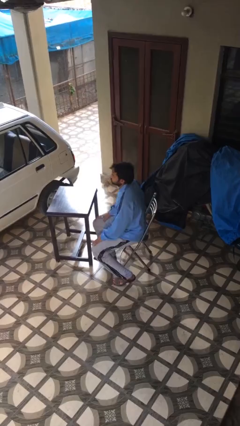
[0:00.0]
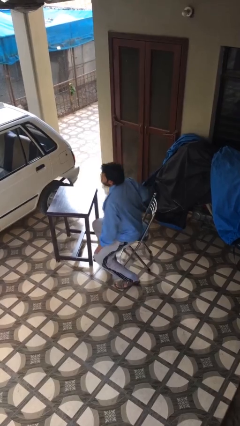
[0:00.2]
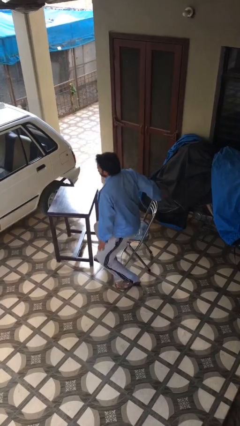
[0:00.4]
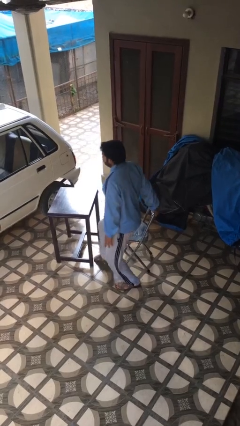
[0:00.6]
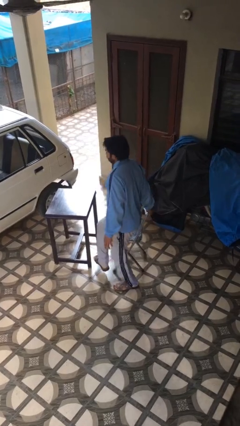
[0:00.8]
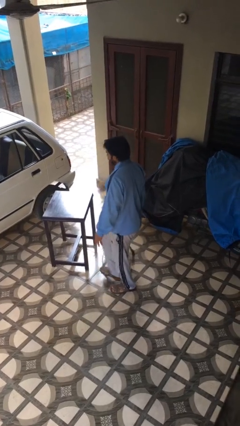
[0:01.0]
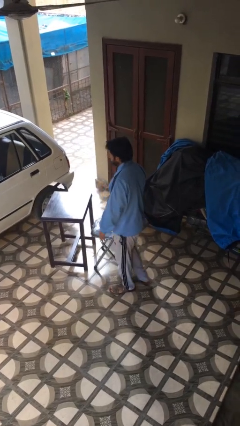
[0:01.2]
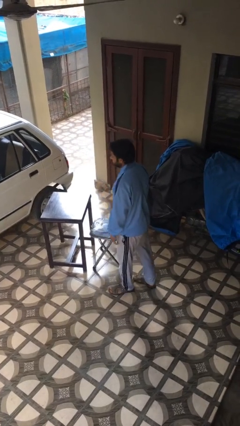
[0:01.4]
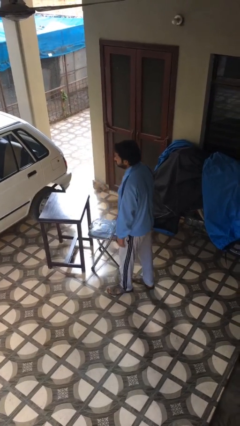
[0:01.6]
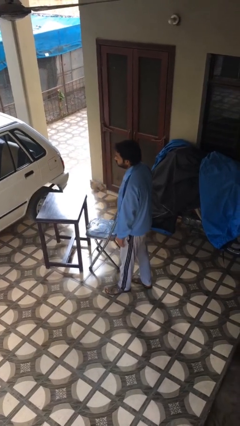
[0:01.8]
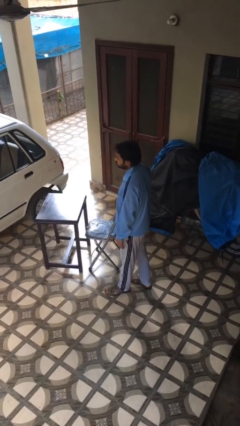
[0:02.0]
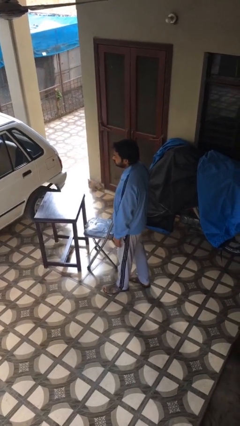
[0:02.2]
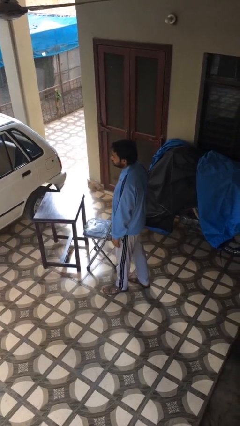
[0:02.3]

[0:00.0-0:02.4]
person stands up

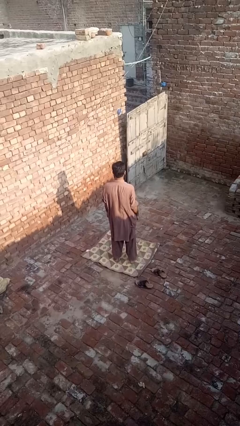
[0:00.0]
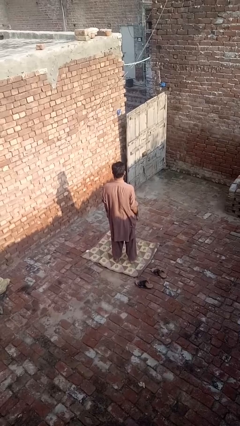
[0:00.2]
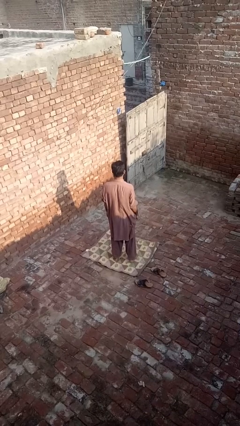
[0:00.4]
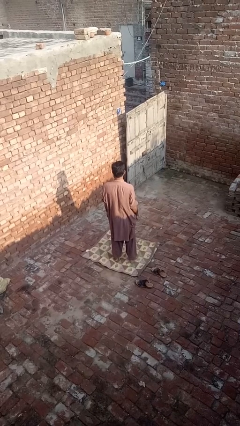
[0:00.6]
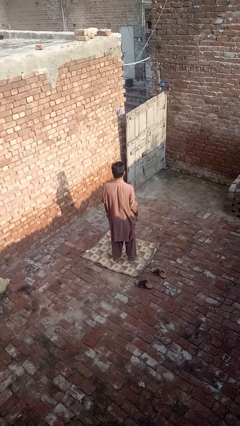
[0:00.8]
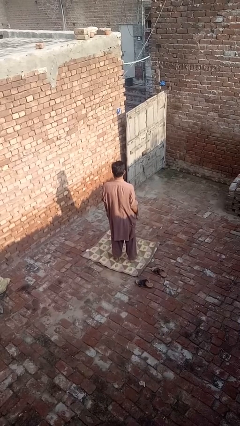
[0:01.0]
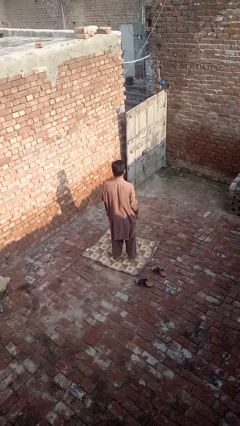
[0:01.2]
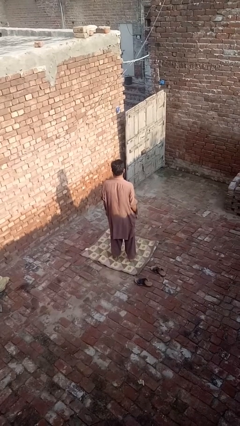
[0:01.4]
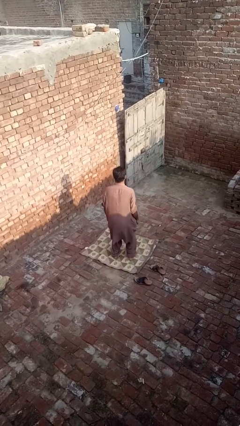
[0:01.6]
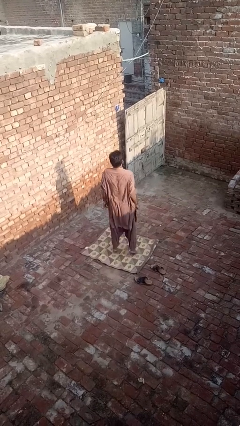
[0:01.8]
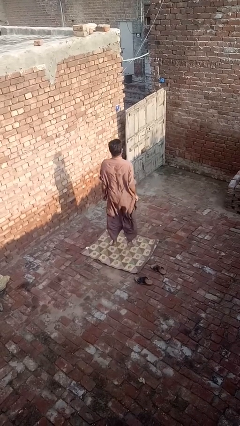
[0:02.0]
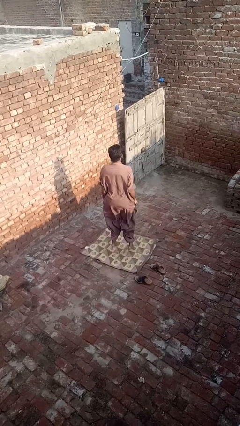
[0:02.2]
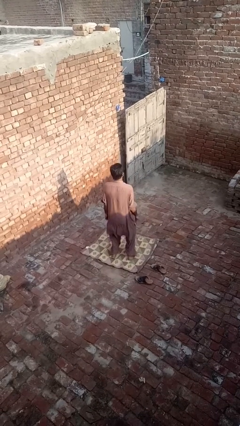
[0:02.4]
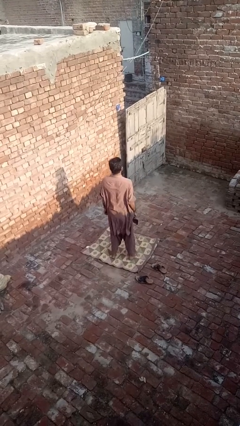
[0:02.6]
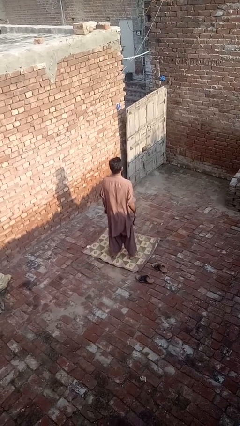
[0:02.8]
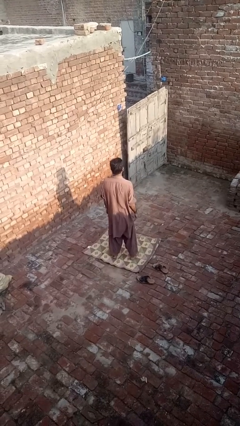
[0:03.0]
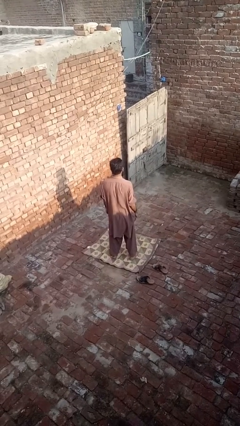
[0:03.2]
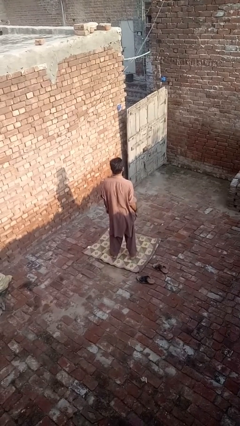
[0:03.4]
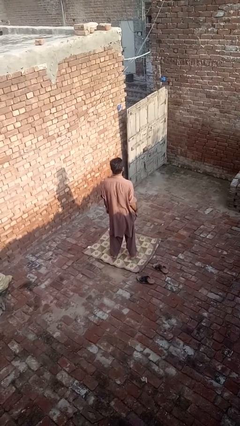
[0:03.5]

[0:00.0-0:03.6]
person jumps

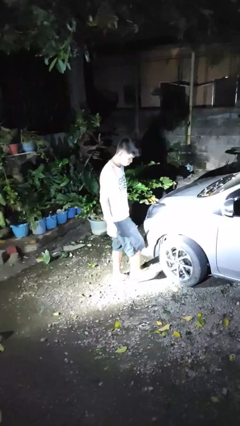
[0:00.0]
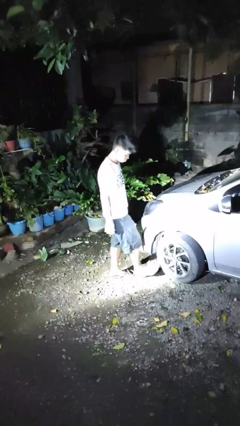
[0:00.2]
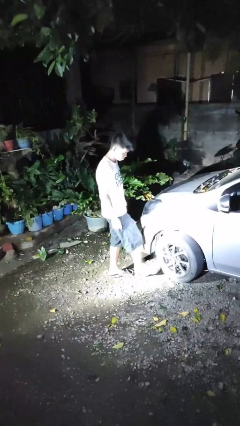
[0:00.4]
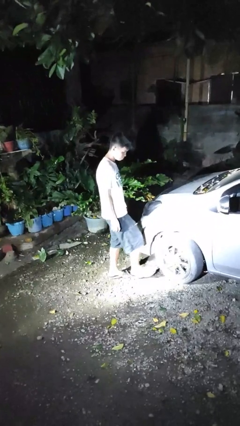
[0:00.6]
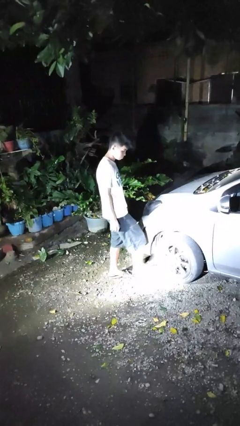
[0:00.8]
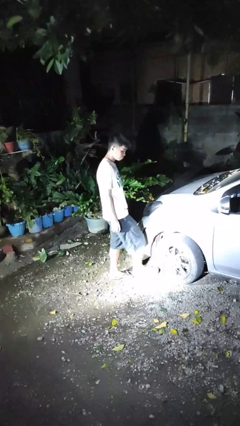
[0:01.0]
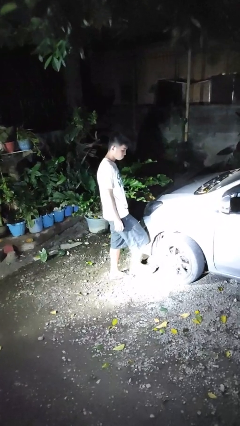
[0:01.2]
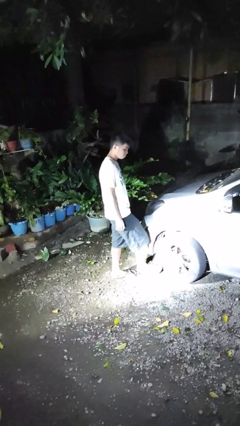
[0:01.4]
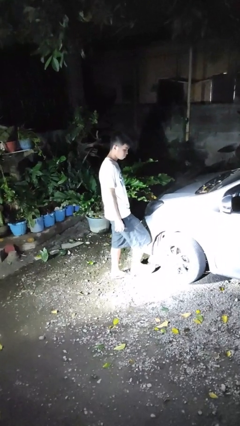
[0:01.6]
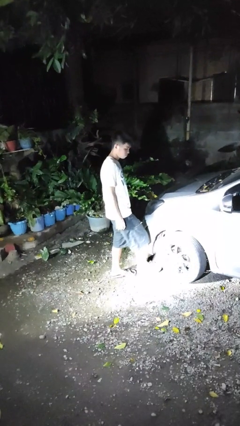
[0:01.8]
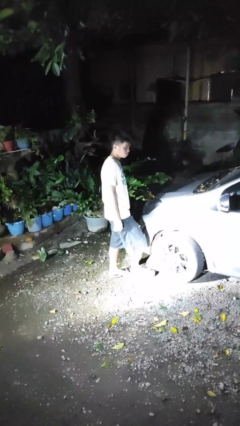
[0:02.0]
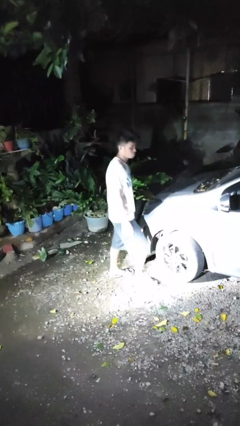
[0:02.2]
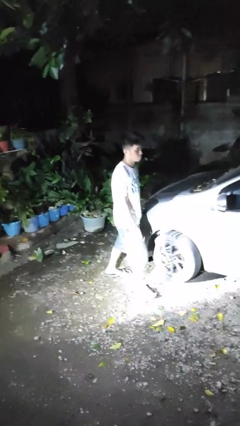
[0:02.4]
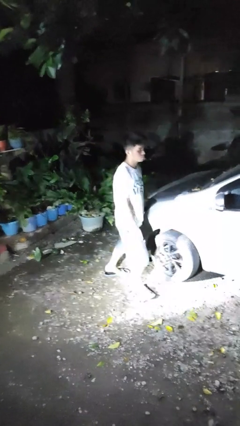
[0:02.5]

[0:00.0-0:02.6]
person kicks car tires

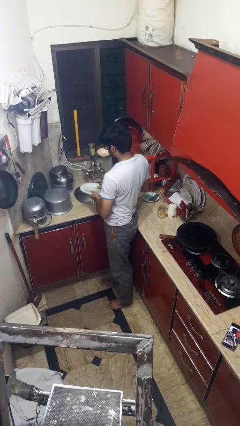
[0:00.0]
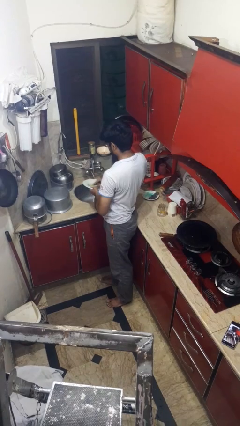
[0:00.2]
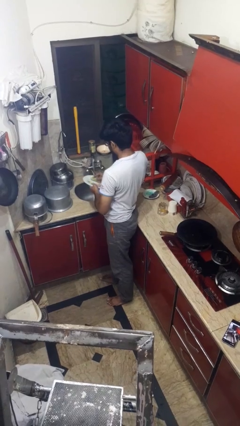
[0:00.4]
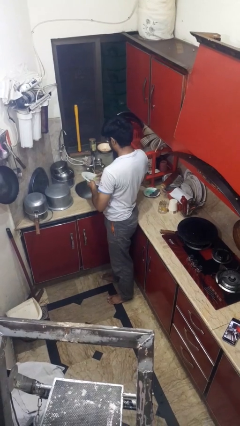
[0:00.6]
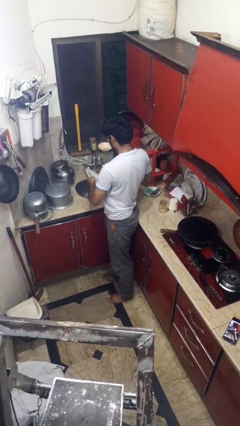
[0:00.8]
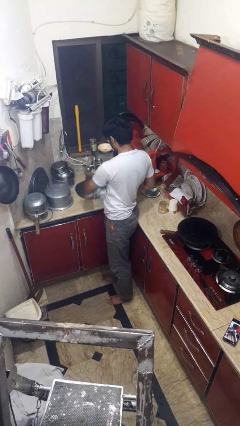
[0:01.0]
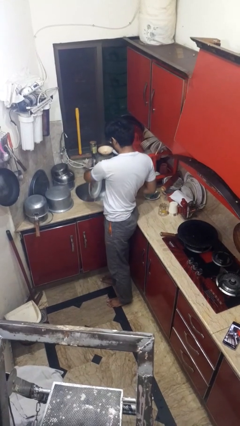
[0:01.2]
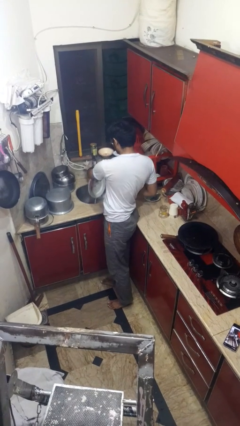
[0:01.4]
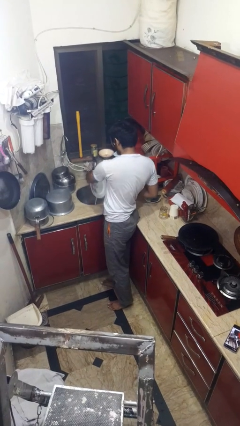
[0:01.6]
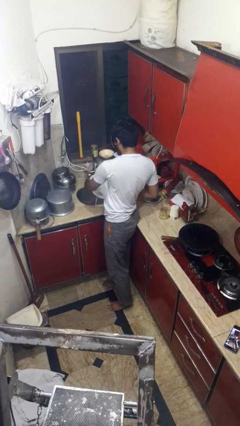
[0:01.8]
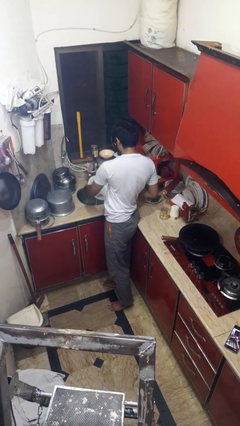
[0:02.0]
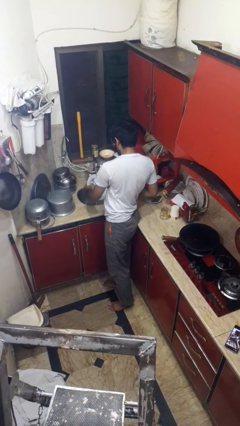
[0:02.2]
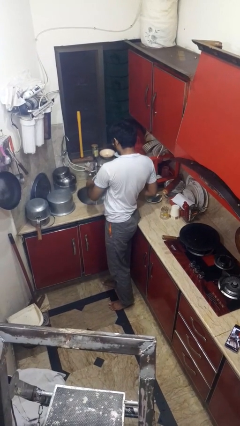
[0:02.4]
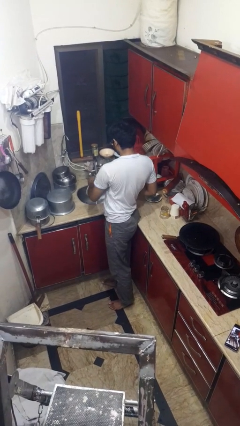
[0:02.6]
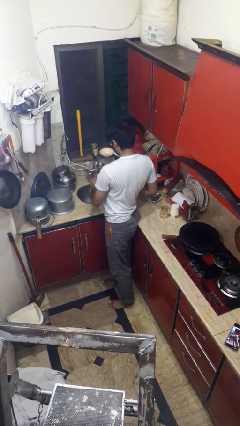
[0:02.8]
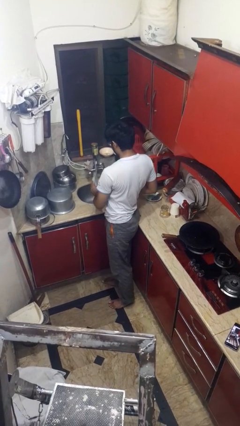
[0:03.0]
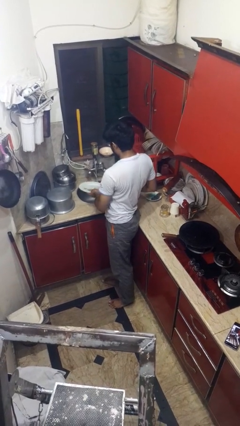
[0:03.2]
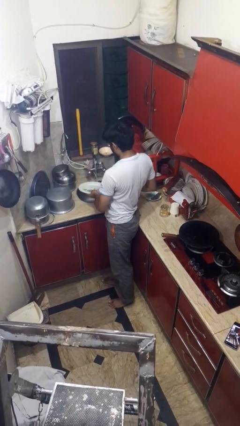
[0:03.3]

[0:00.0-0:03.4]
person washes dish

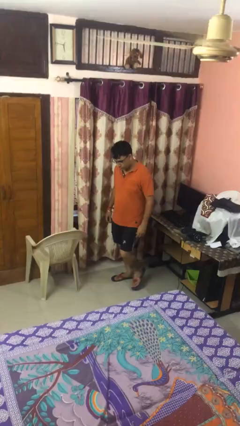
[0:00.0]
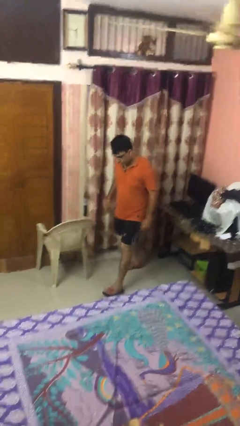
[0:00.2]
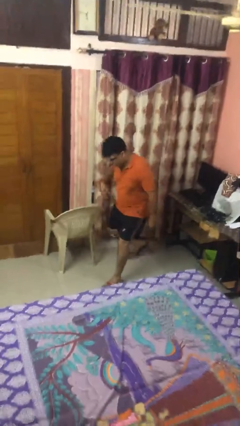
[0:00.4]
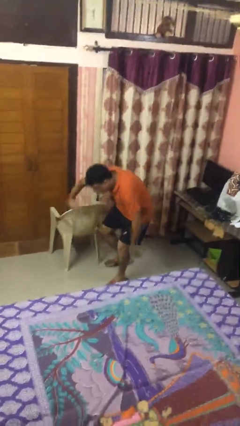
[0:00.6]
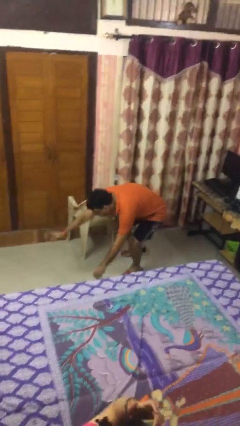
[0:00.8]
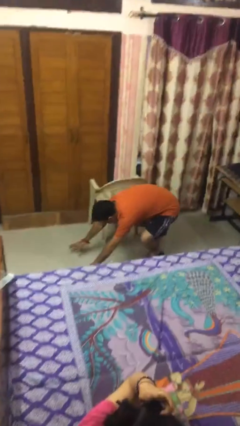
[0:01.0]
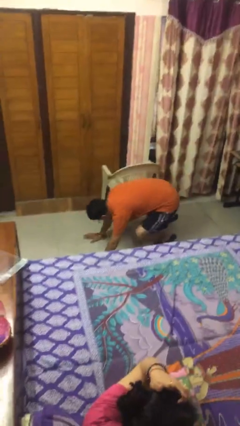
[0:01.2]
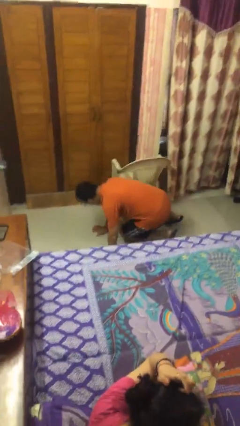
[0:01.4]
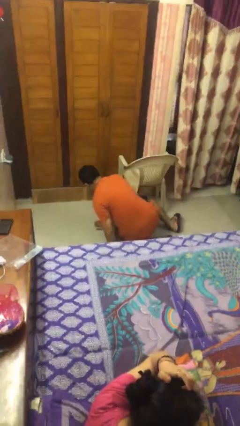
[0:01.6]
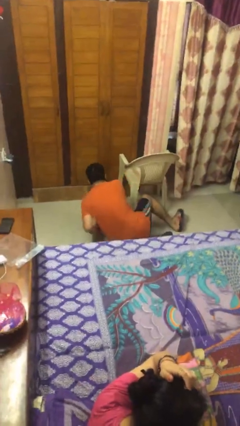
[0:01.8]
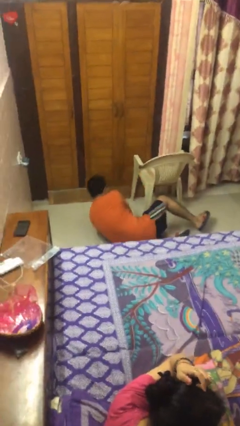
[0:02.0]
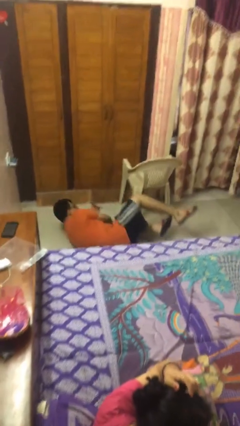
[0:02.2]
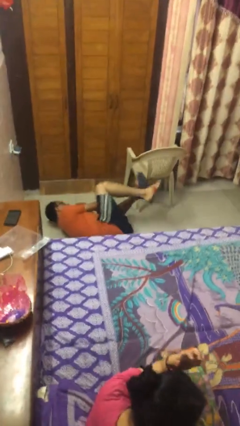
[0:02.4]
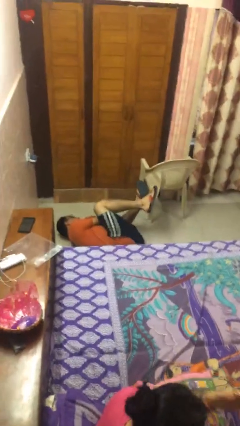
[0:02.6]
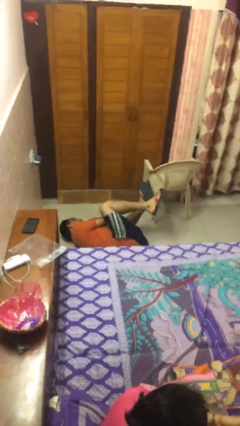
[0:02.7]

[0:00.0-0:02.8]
person trips on object on floor

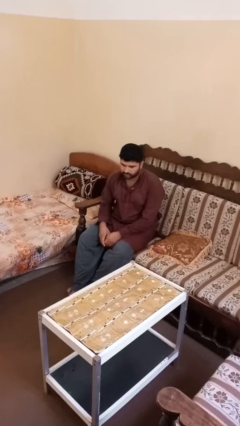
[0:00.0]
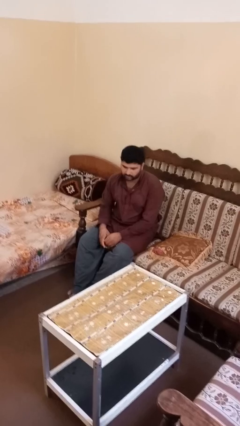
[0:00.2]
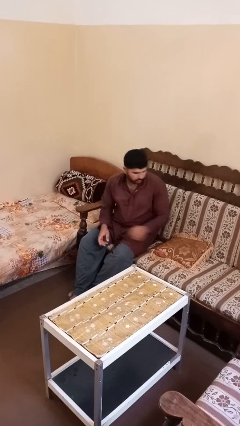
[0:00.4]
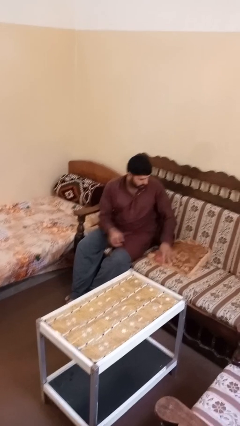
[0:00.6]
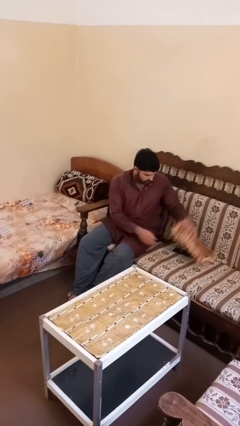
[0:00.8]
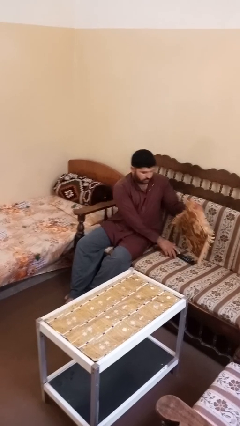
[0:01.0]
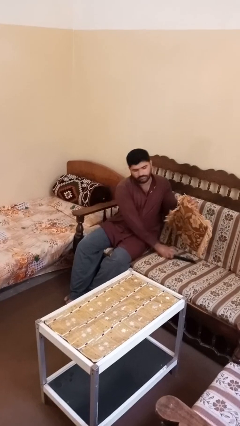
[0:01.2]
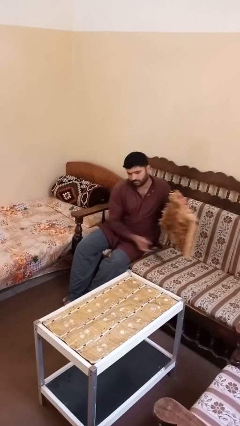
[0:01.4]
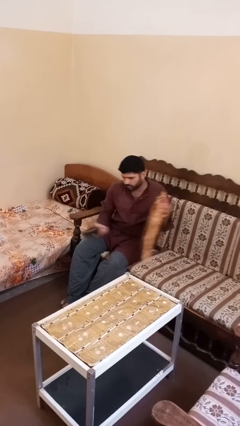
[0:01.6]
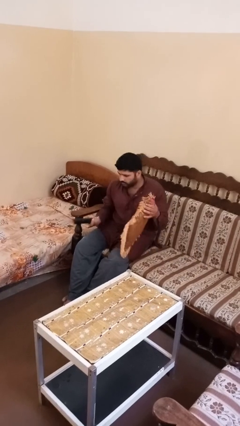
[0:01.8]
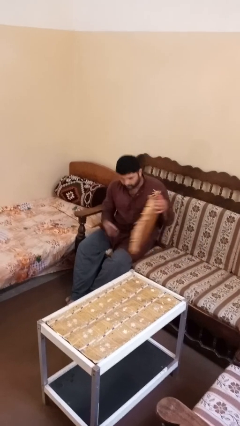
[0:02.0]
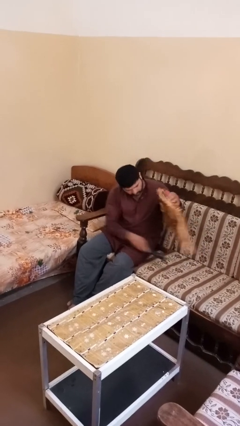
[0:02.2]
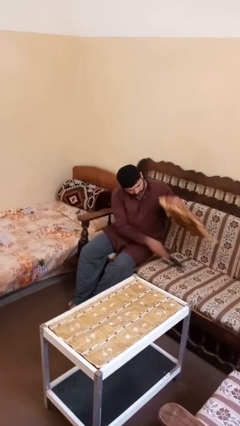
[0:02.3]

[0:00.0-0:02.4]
person searches in couch

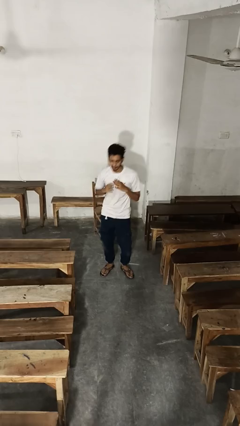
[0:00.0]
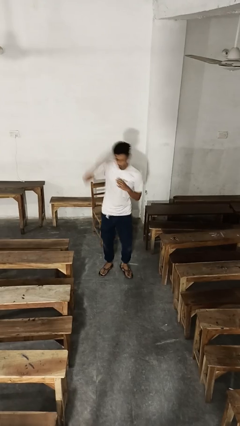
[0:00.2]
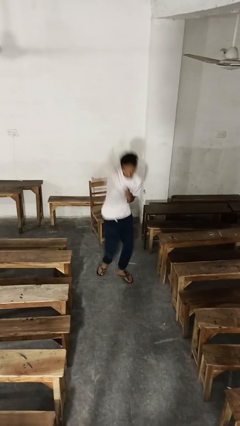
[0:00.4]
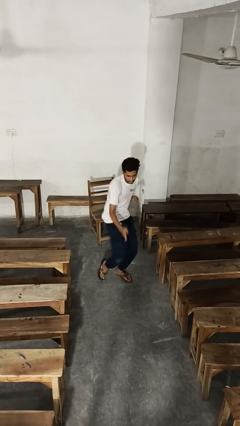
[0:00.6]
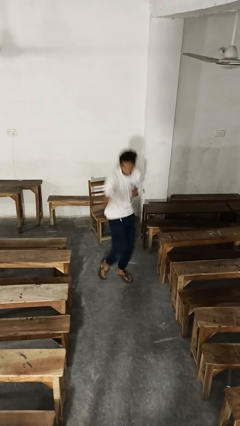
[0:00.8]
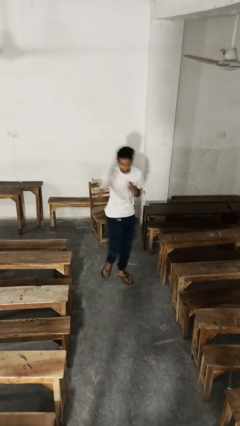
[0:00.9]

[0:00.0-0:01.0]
person karate chop
